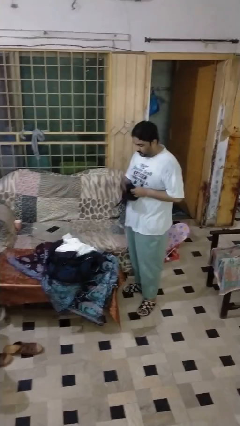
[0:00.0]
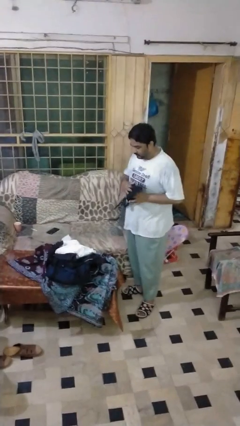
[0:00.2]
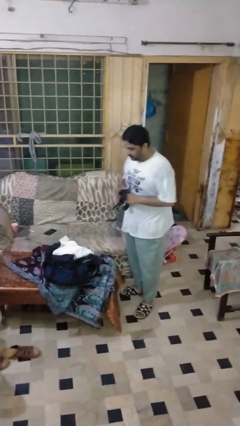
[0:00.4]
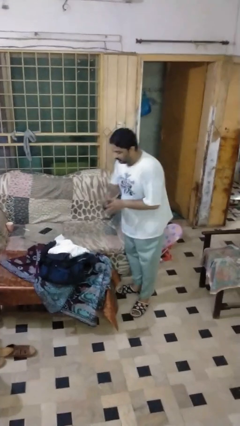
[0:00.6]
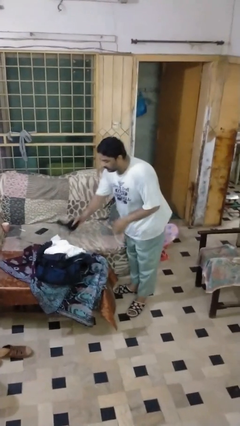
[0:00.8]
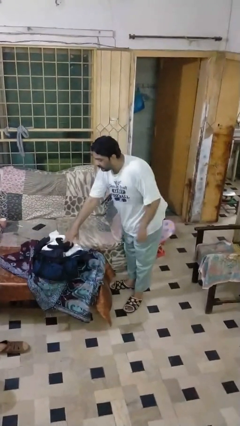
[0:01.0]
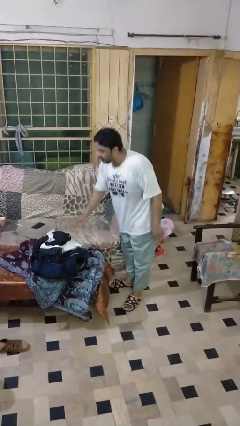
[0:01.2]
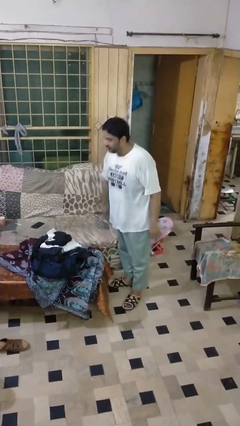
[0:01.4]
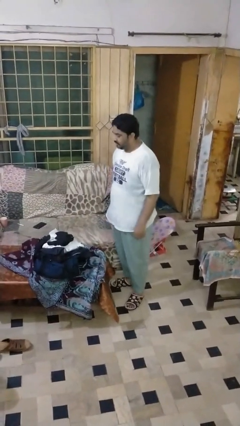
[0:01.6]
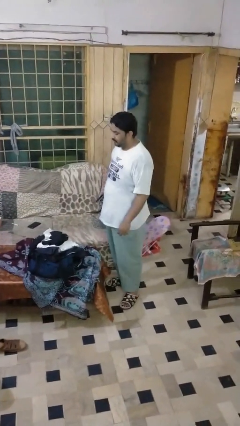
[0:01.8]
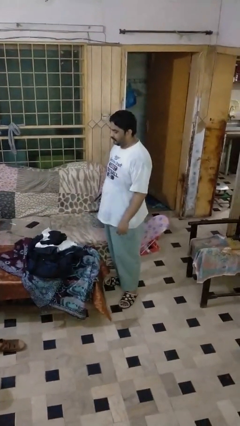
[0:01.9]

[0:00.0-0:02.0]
person folds shirt

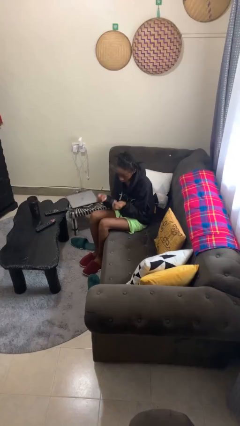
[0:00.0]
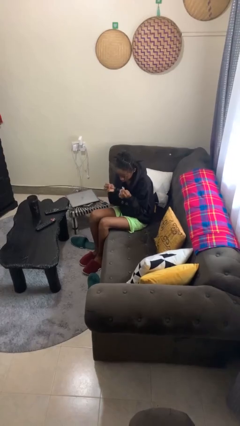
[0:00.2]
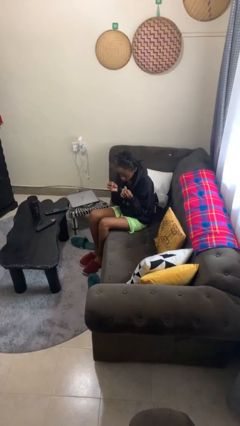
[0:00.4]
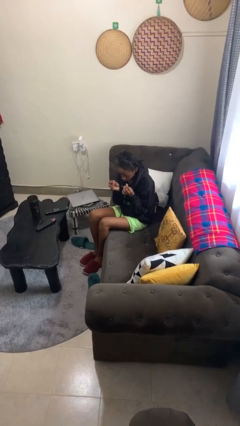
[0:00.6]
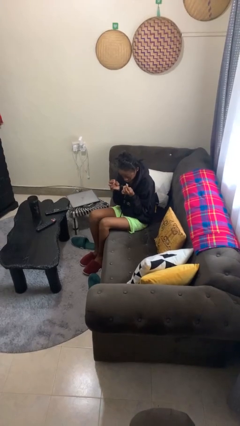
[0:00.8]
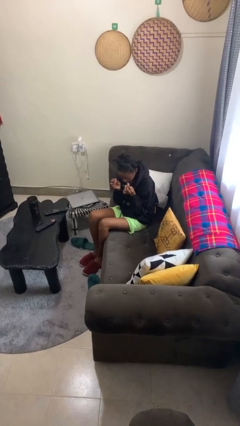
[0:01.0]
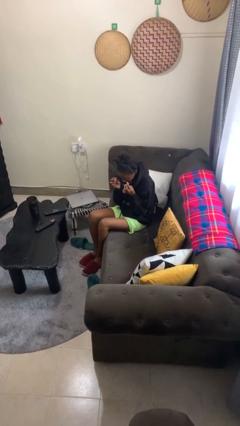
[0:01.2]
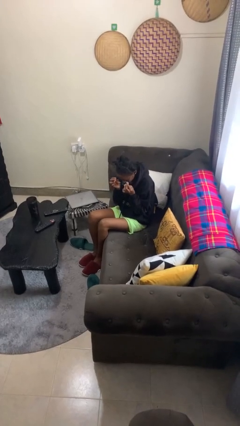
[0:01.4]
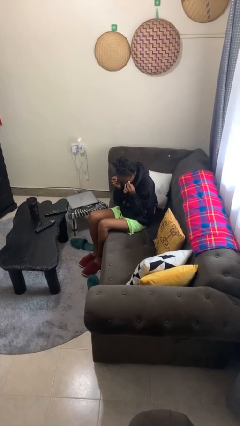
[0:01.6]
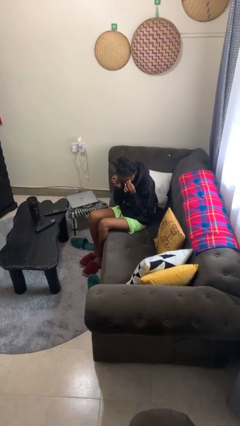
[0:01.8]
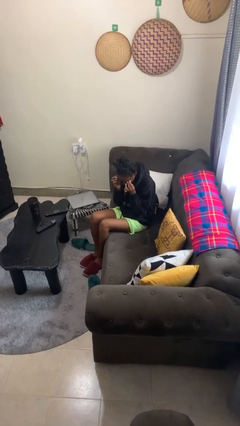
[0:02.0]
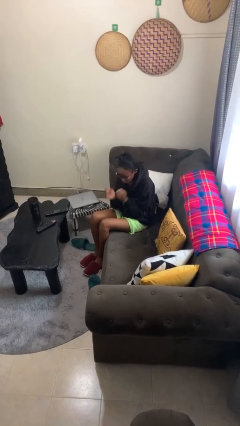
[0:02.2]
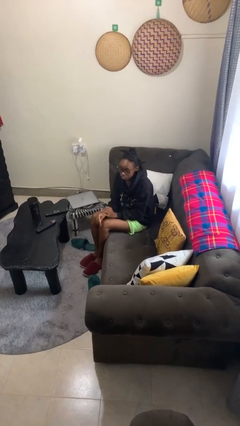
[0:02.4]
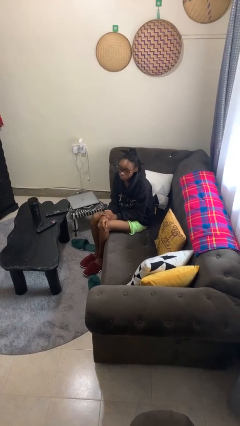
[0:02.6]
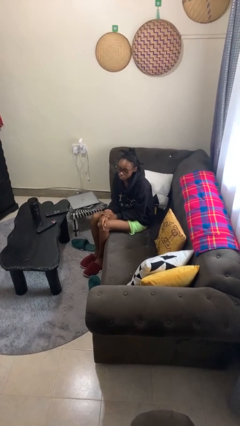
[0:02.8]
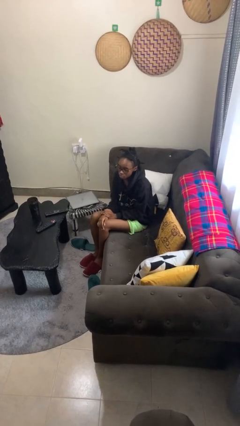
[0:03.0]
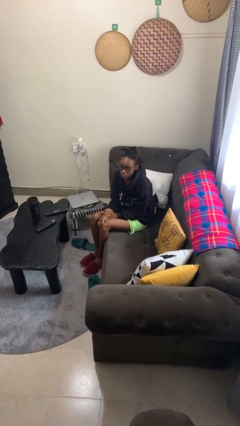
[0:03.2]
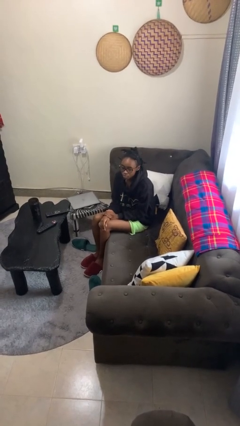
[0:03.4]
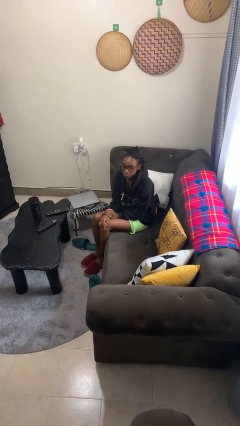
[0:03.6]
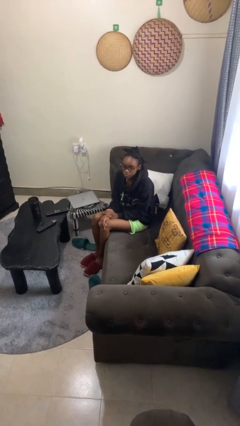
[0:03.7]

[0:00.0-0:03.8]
person puts on glasses

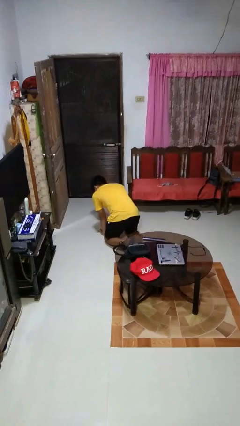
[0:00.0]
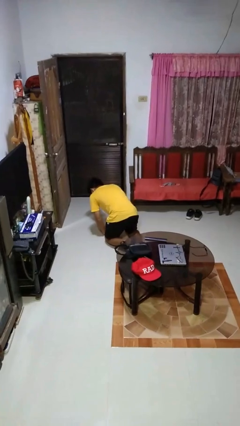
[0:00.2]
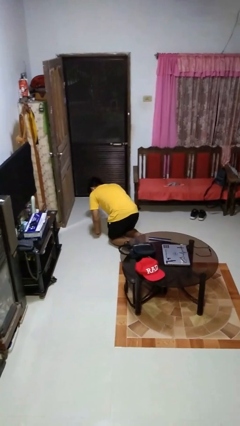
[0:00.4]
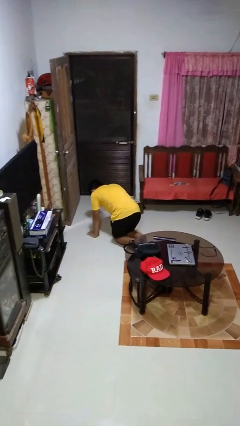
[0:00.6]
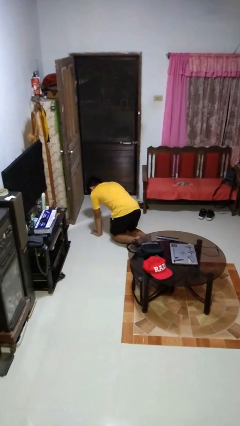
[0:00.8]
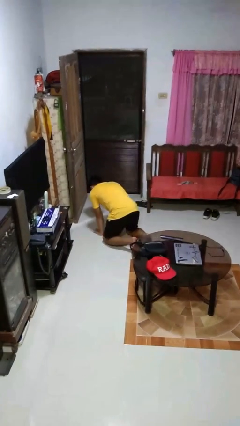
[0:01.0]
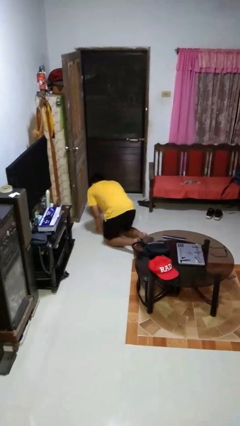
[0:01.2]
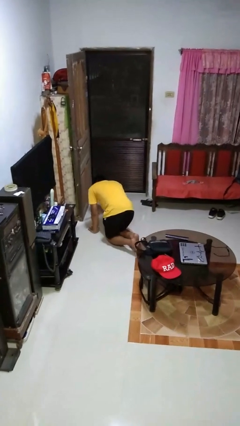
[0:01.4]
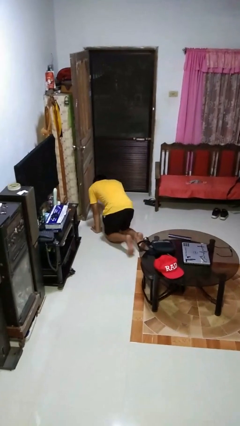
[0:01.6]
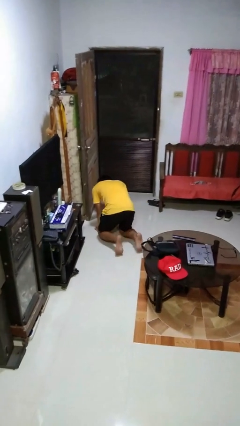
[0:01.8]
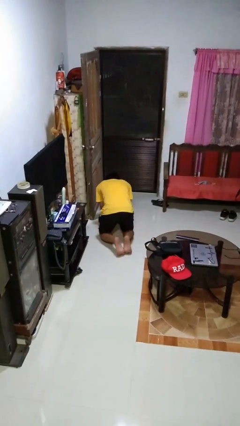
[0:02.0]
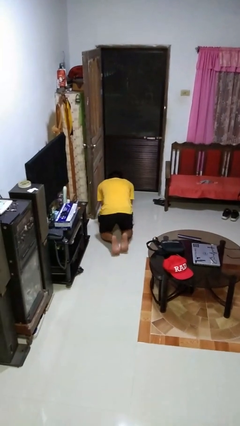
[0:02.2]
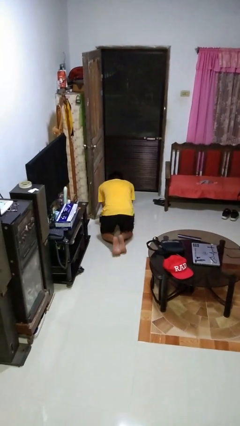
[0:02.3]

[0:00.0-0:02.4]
person crawls

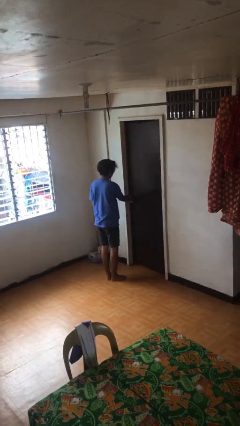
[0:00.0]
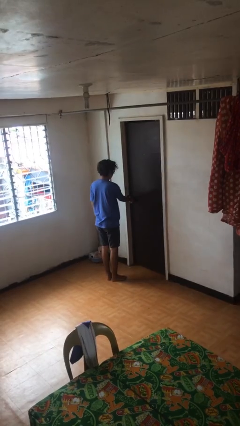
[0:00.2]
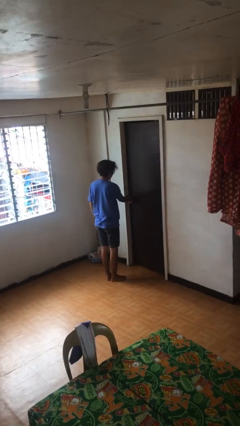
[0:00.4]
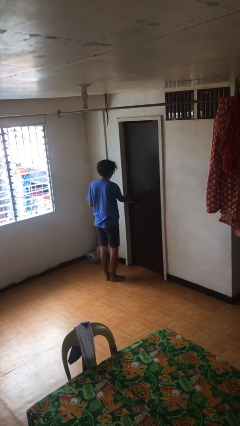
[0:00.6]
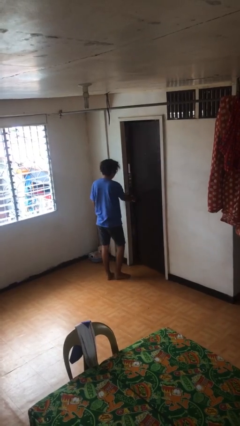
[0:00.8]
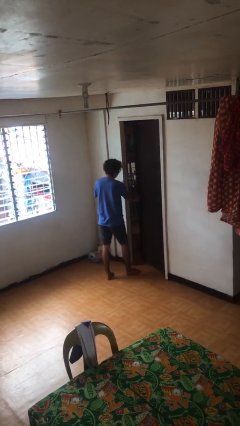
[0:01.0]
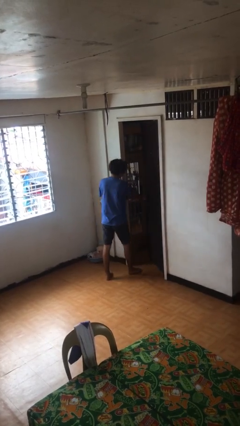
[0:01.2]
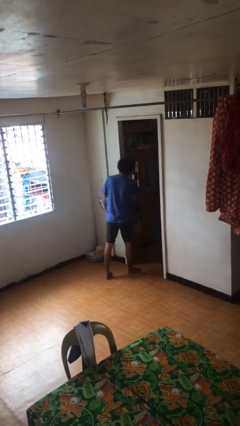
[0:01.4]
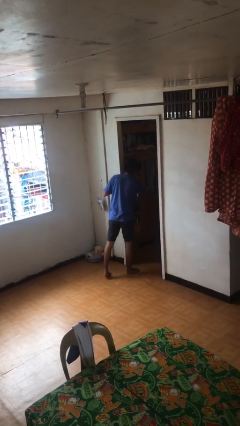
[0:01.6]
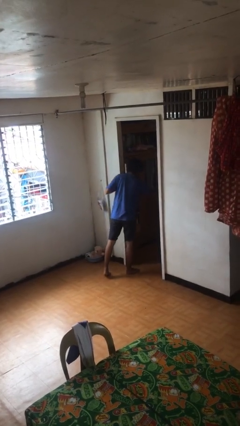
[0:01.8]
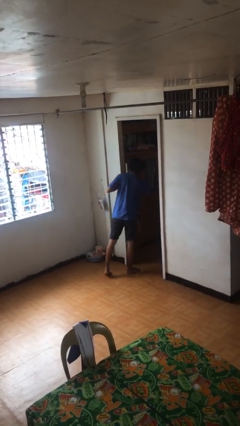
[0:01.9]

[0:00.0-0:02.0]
person opens facility door

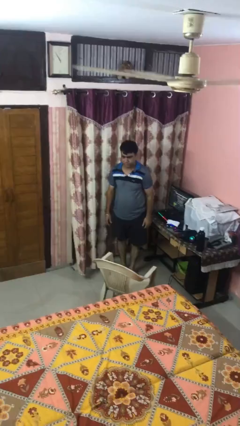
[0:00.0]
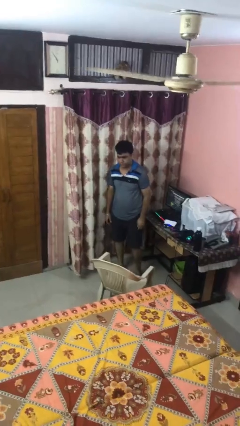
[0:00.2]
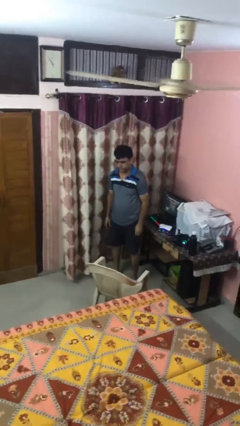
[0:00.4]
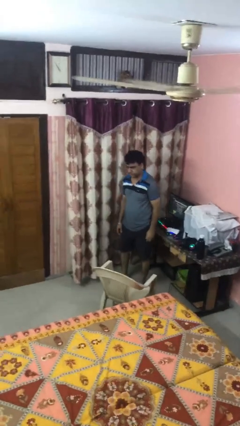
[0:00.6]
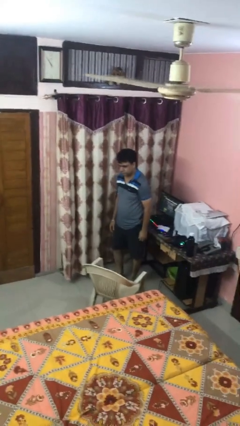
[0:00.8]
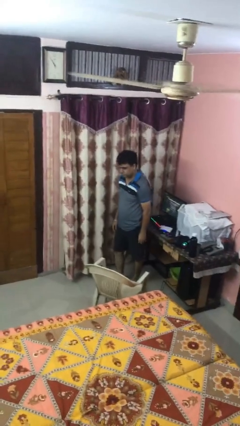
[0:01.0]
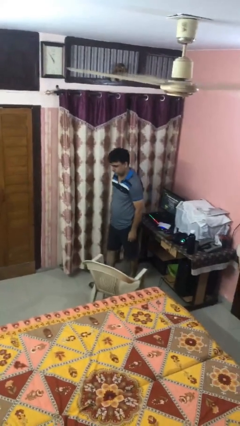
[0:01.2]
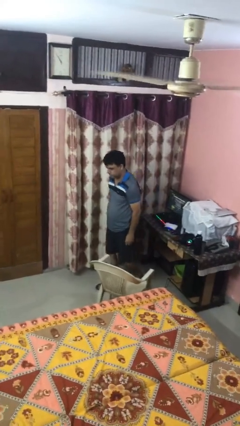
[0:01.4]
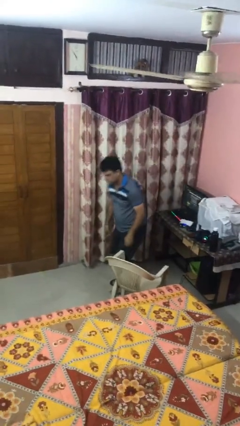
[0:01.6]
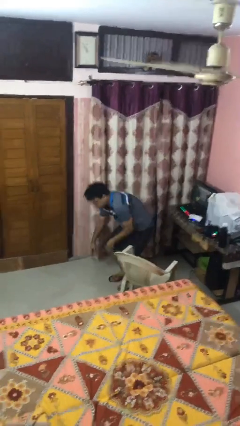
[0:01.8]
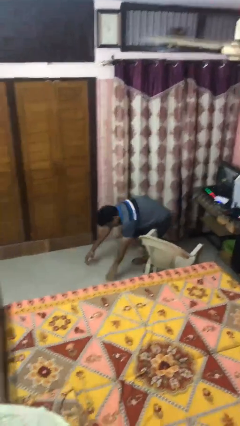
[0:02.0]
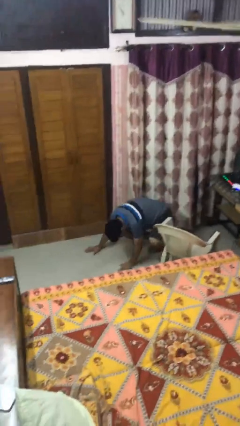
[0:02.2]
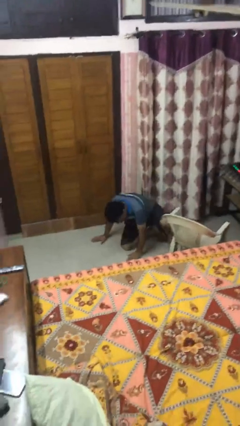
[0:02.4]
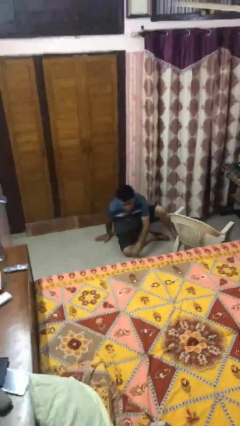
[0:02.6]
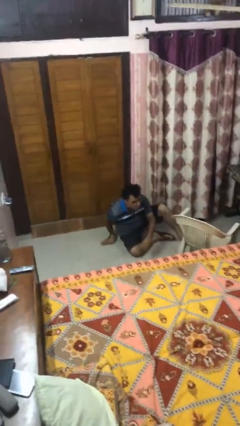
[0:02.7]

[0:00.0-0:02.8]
person trips on object on floor

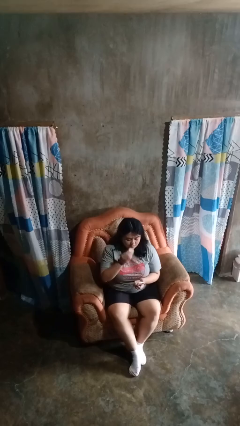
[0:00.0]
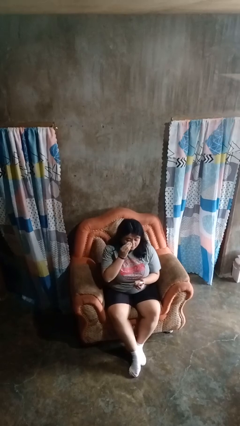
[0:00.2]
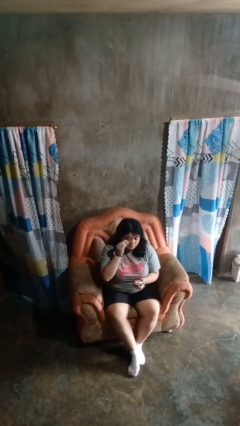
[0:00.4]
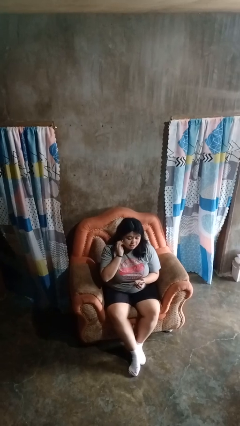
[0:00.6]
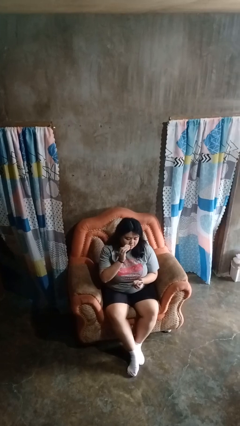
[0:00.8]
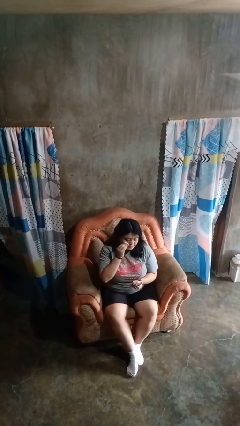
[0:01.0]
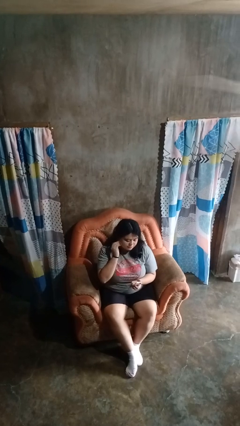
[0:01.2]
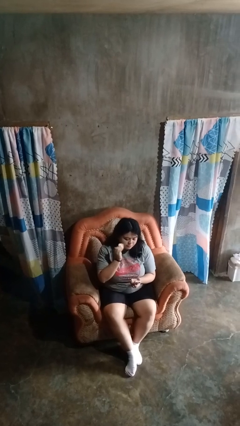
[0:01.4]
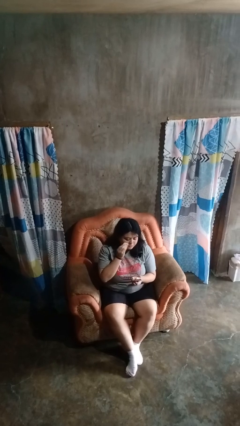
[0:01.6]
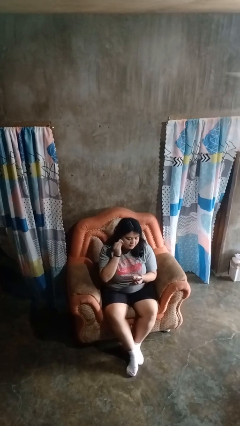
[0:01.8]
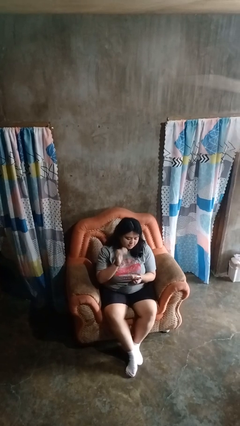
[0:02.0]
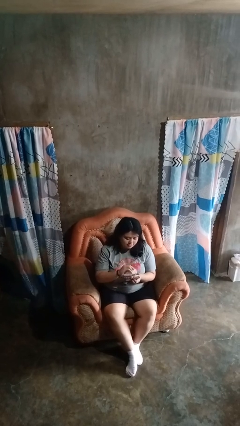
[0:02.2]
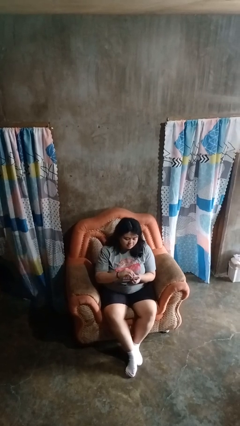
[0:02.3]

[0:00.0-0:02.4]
person applies foundation makeup

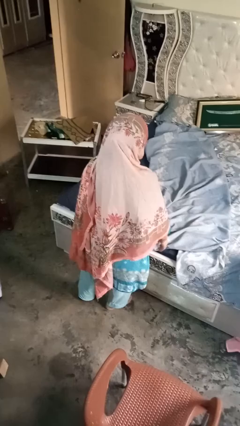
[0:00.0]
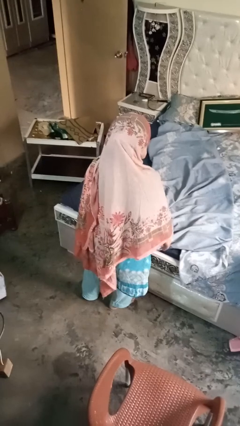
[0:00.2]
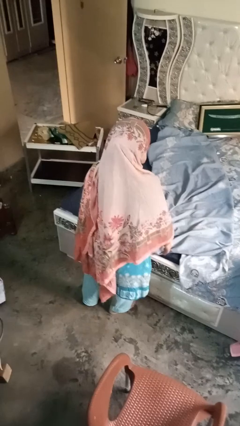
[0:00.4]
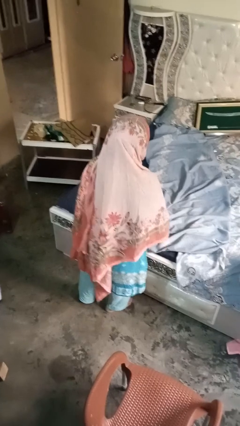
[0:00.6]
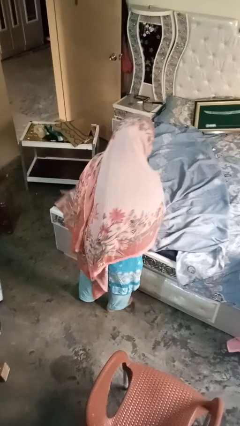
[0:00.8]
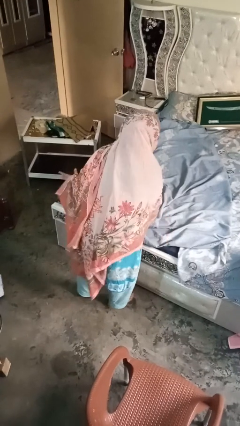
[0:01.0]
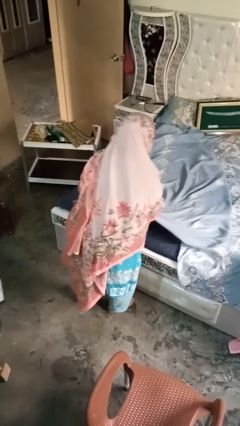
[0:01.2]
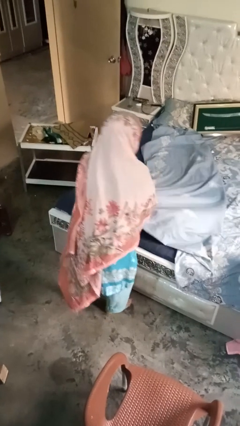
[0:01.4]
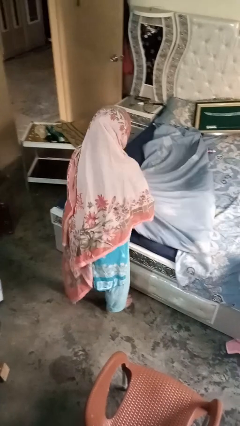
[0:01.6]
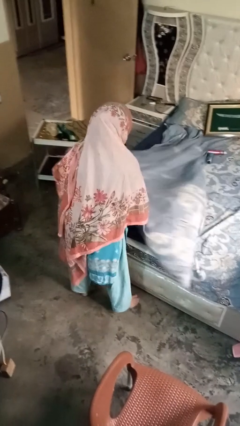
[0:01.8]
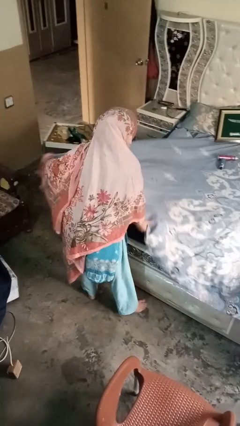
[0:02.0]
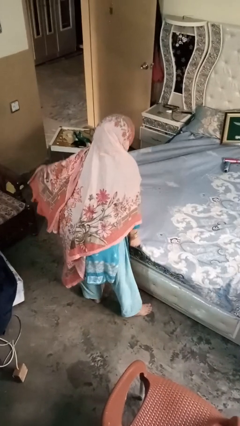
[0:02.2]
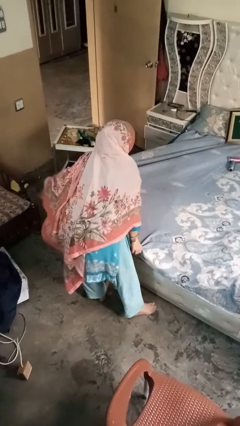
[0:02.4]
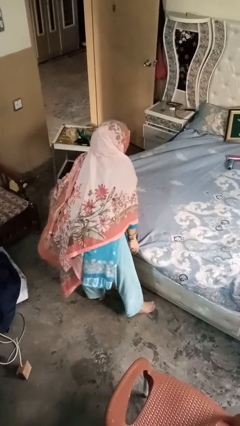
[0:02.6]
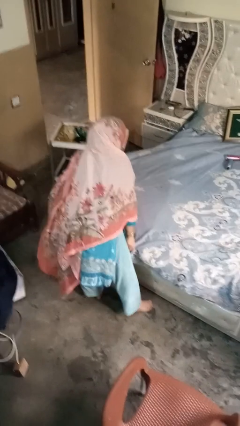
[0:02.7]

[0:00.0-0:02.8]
person makes bed
